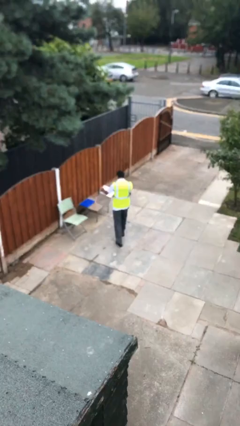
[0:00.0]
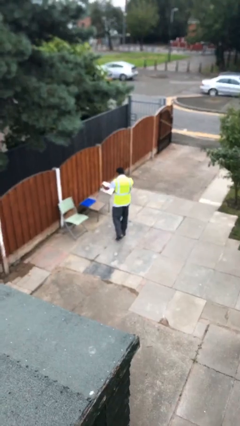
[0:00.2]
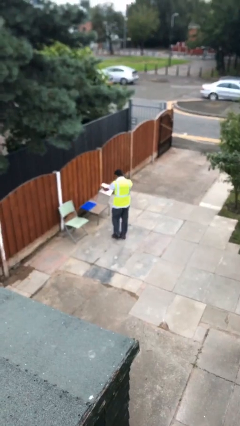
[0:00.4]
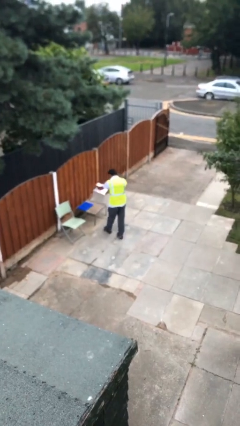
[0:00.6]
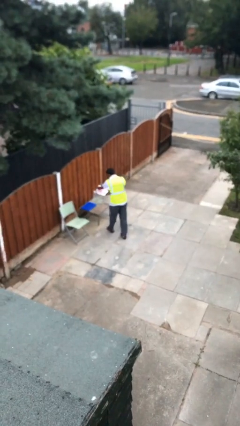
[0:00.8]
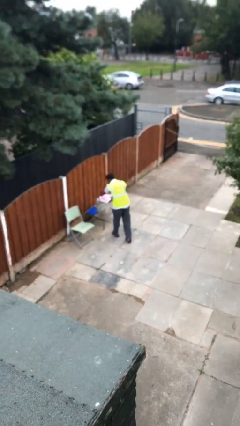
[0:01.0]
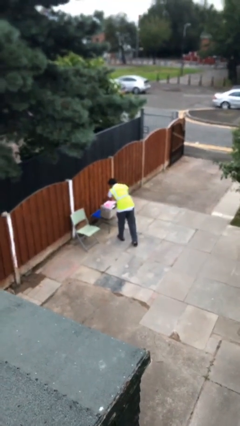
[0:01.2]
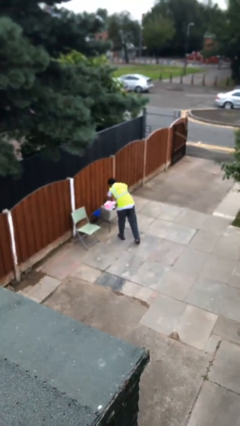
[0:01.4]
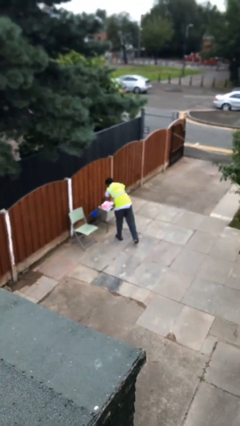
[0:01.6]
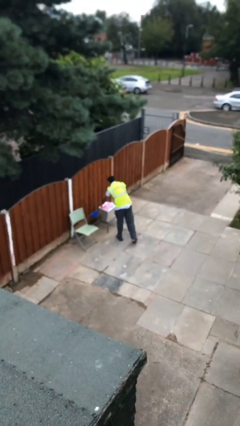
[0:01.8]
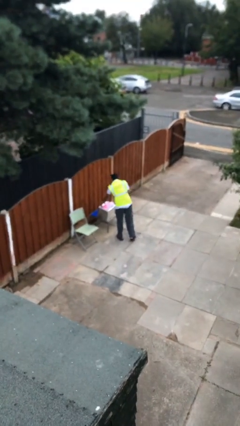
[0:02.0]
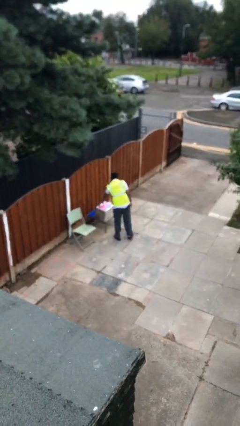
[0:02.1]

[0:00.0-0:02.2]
person puts down object on table

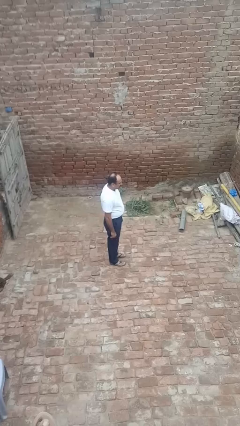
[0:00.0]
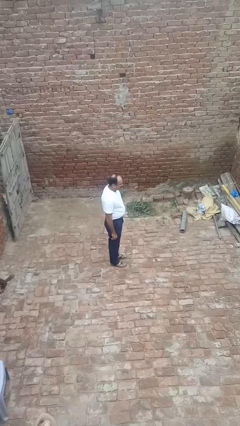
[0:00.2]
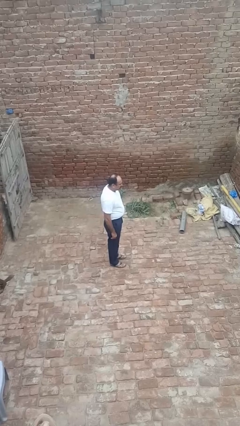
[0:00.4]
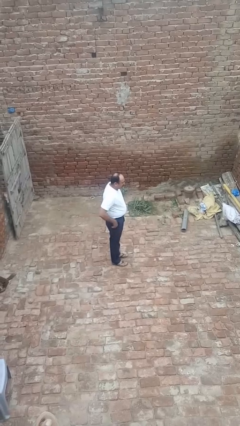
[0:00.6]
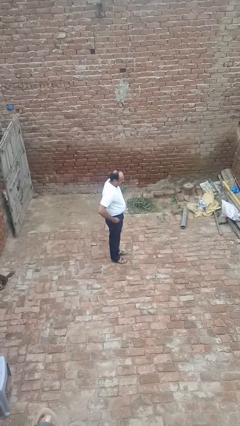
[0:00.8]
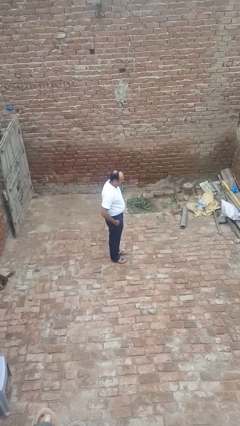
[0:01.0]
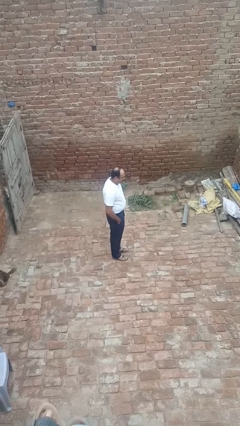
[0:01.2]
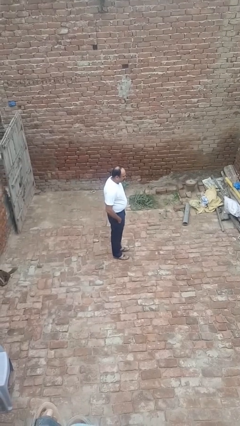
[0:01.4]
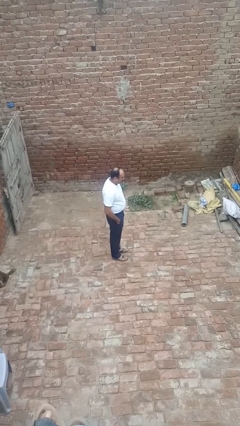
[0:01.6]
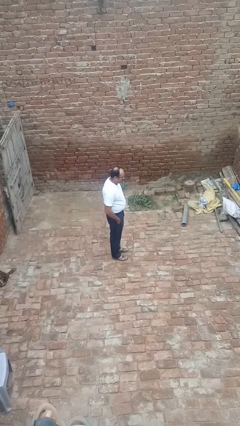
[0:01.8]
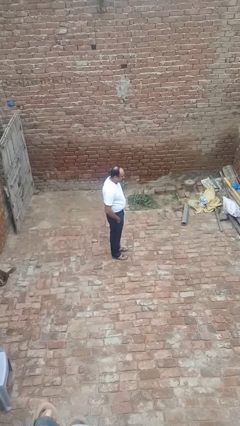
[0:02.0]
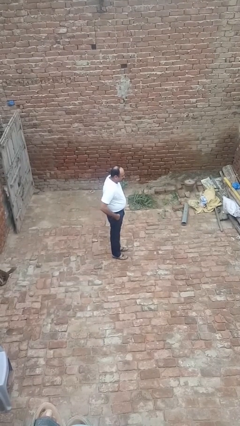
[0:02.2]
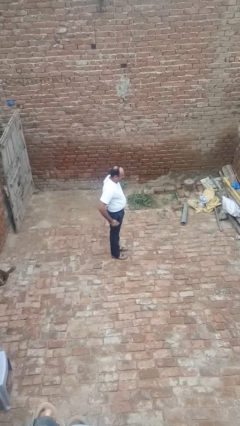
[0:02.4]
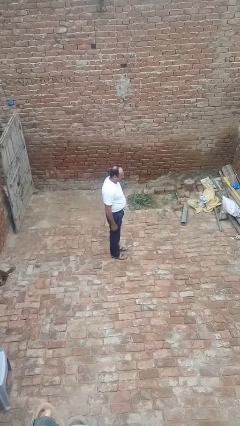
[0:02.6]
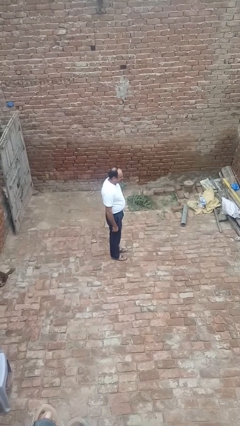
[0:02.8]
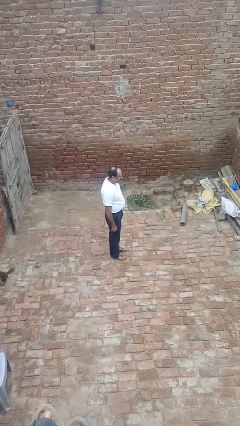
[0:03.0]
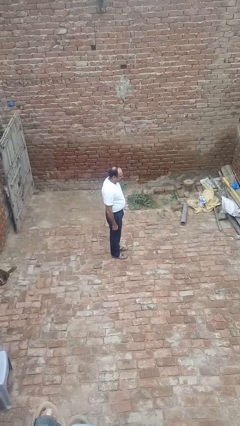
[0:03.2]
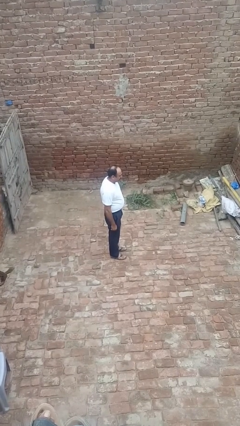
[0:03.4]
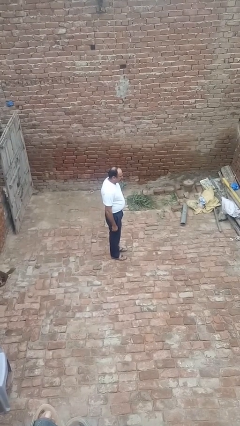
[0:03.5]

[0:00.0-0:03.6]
person puts hands in back pockets

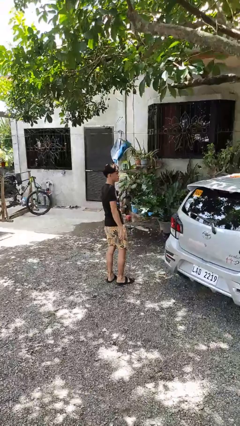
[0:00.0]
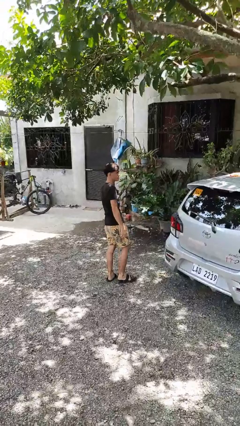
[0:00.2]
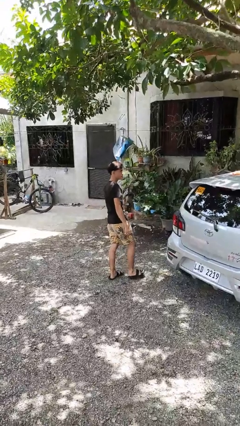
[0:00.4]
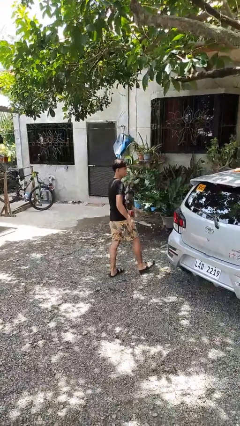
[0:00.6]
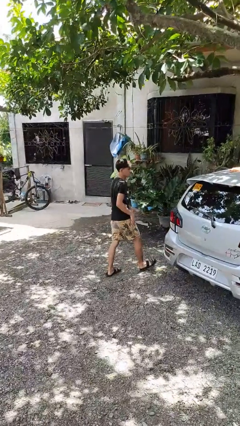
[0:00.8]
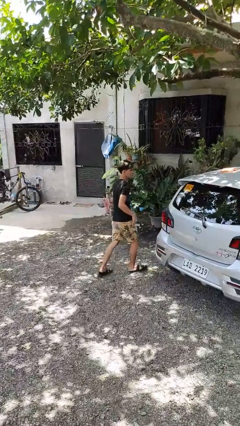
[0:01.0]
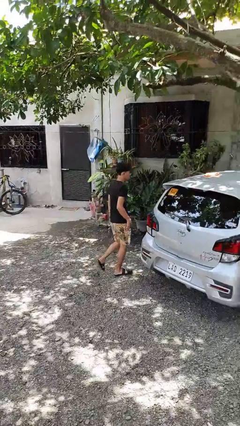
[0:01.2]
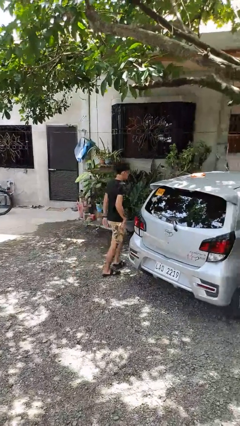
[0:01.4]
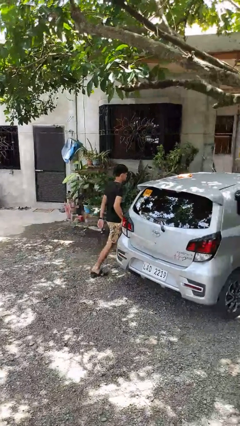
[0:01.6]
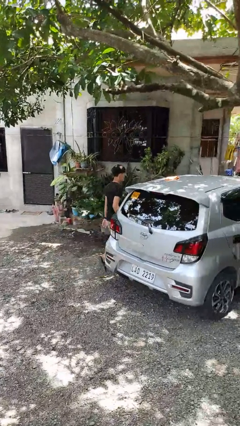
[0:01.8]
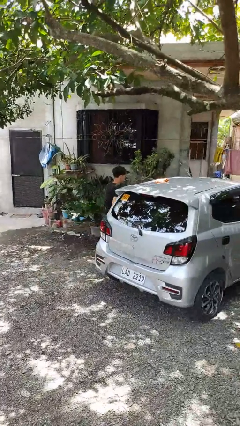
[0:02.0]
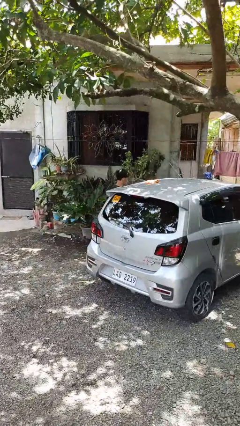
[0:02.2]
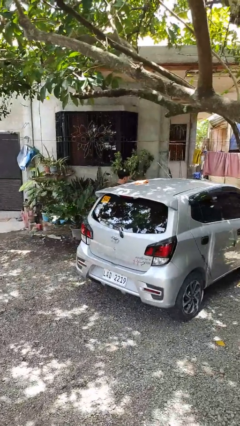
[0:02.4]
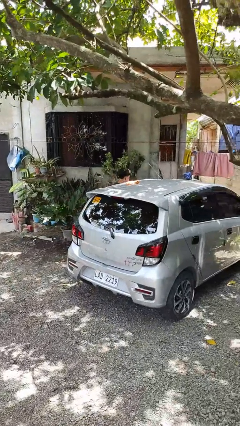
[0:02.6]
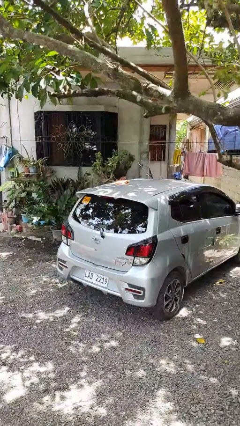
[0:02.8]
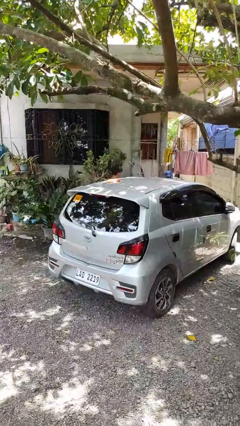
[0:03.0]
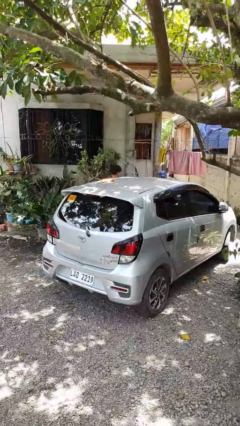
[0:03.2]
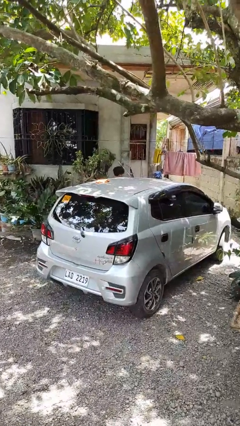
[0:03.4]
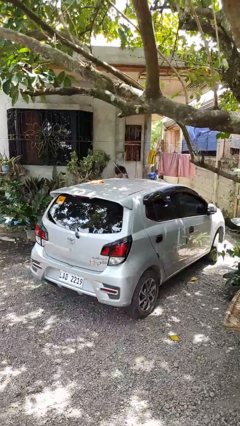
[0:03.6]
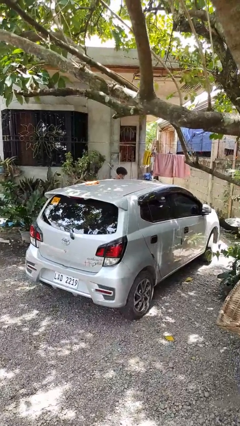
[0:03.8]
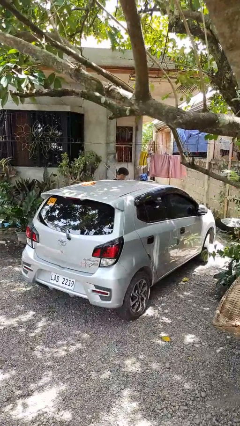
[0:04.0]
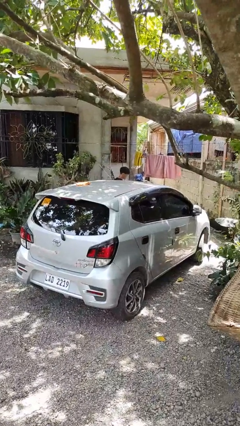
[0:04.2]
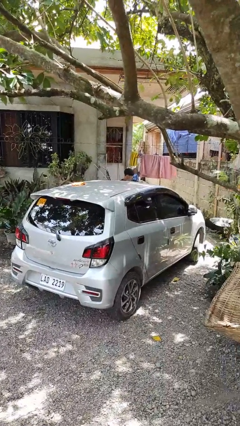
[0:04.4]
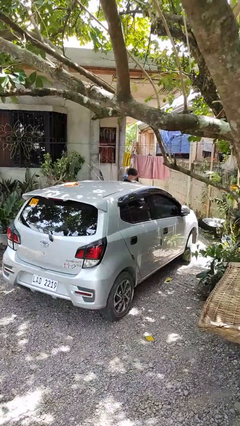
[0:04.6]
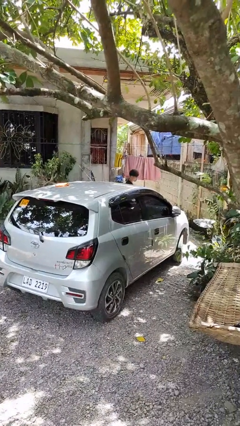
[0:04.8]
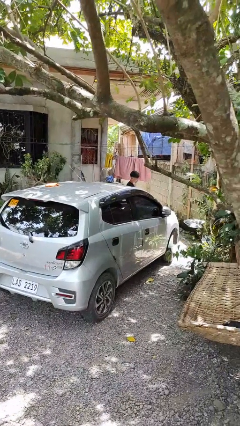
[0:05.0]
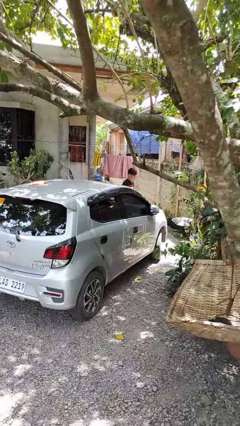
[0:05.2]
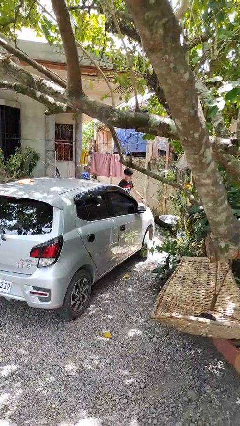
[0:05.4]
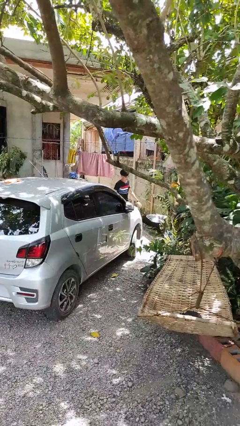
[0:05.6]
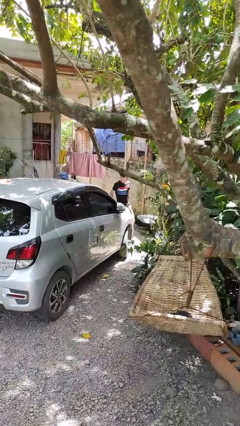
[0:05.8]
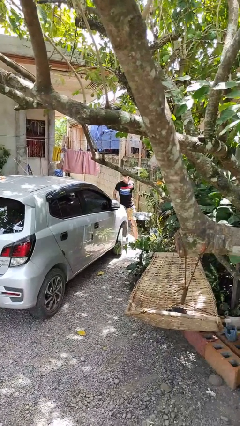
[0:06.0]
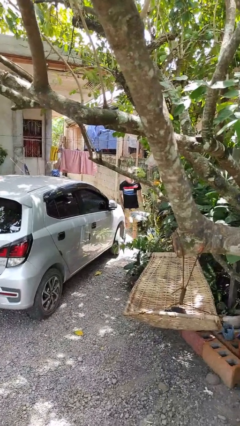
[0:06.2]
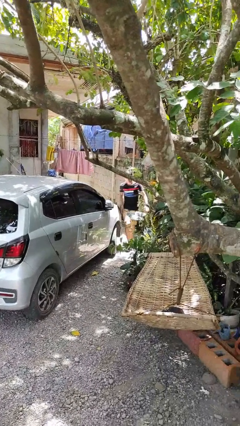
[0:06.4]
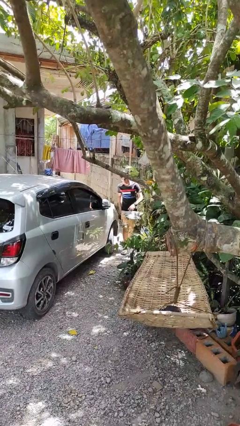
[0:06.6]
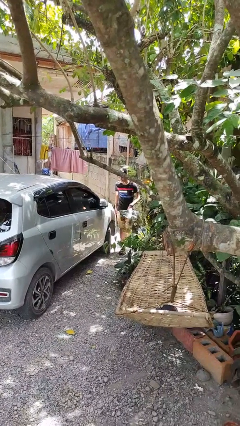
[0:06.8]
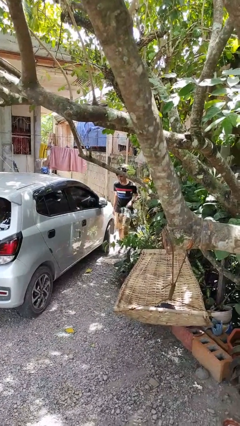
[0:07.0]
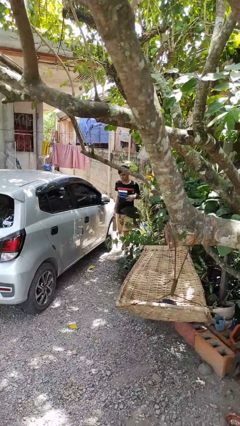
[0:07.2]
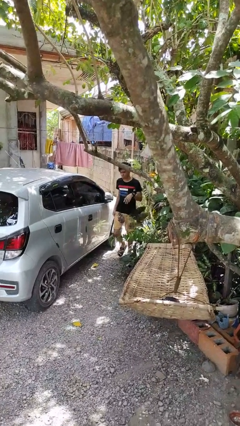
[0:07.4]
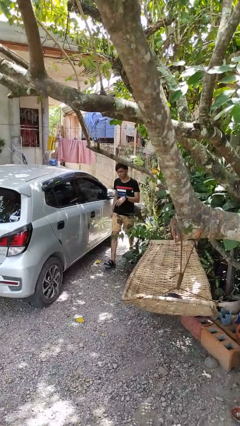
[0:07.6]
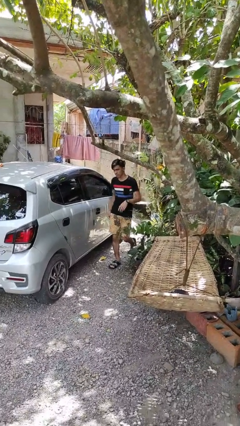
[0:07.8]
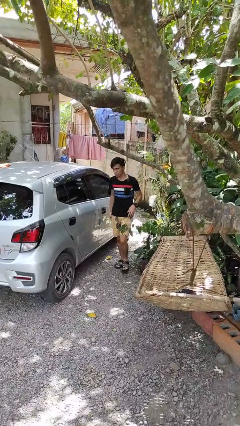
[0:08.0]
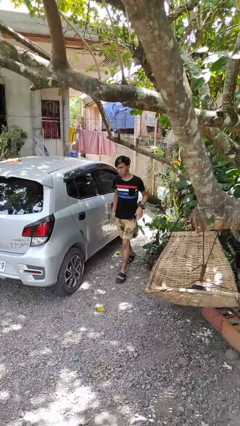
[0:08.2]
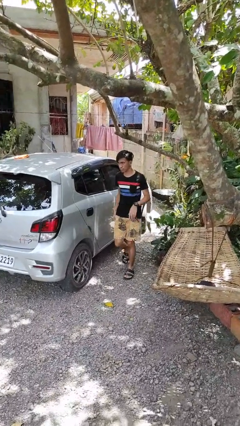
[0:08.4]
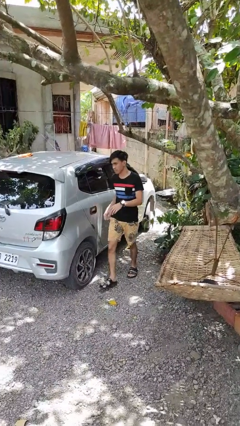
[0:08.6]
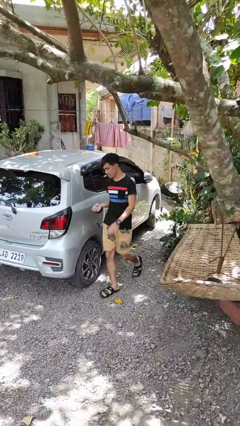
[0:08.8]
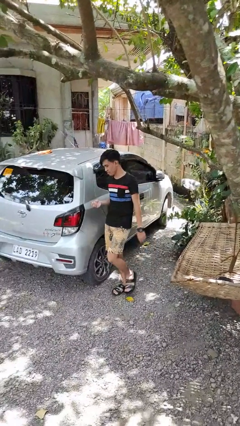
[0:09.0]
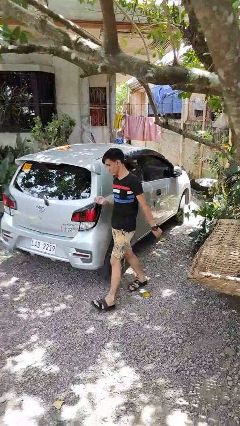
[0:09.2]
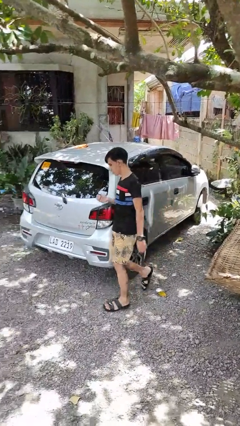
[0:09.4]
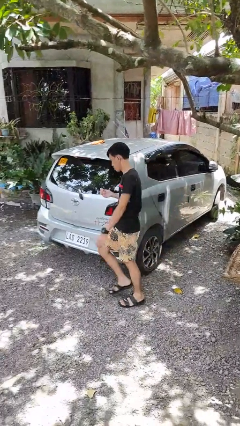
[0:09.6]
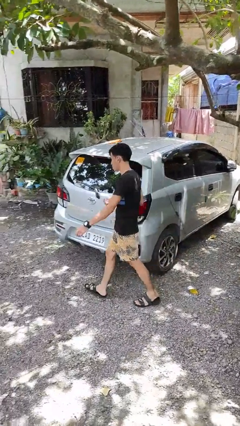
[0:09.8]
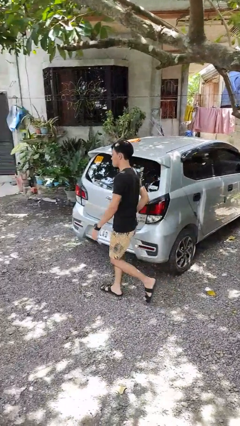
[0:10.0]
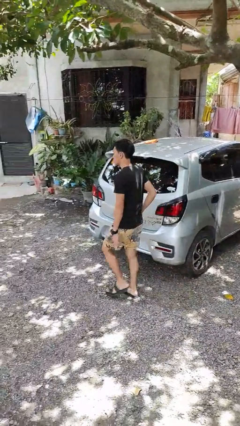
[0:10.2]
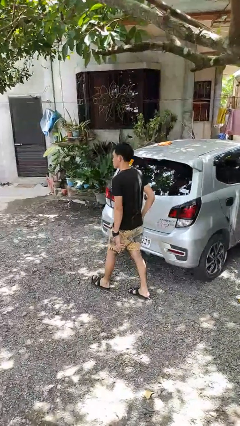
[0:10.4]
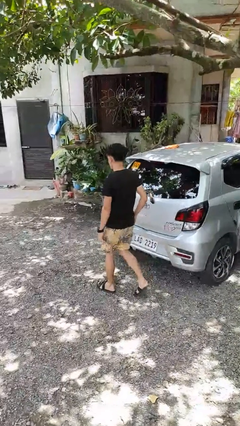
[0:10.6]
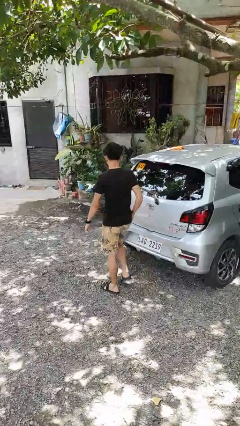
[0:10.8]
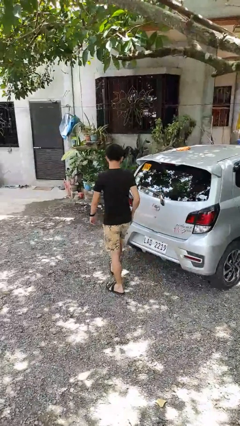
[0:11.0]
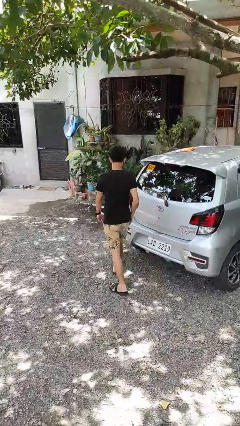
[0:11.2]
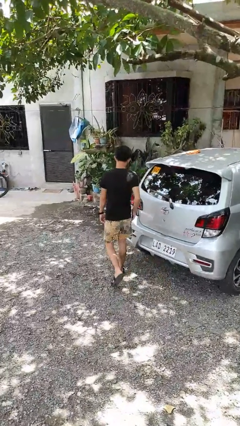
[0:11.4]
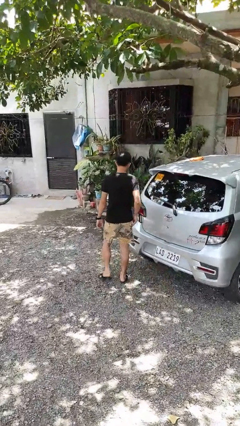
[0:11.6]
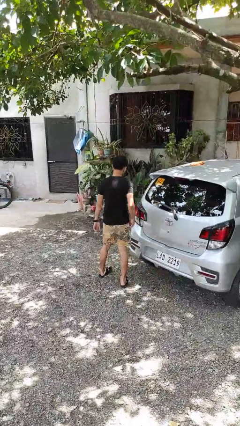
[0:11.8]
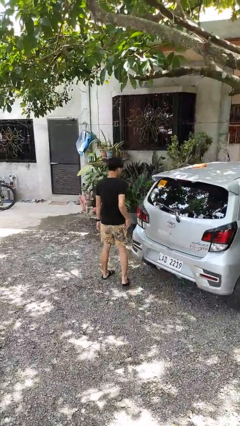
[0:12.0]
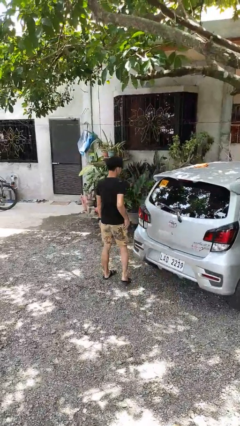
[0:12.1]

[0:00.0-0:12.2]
person walks around car
